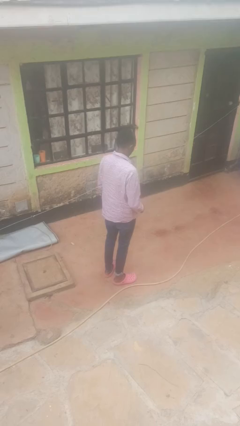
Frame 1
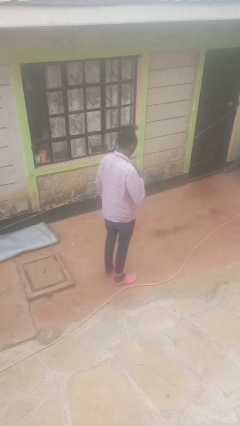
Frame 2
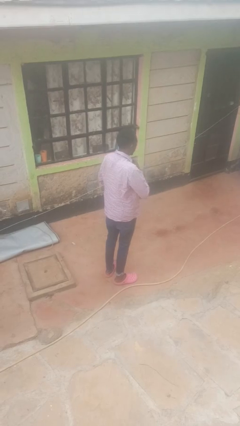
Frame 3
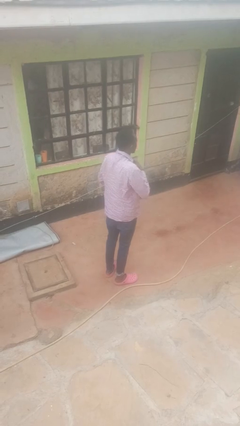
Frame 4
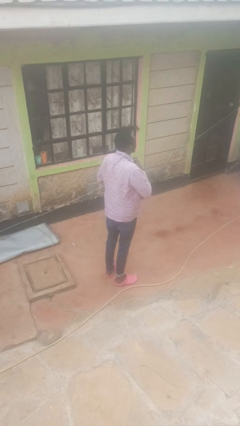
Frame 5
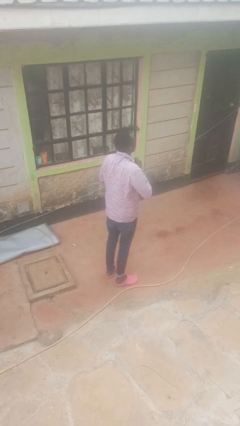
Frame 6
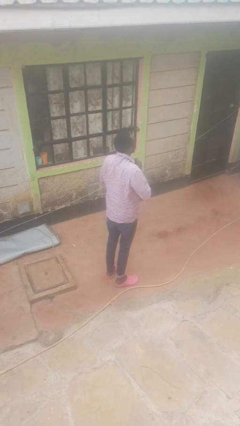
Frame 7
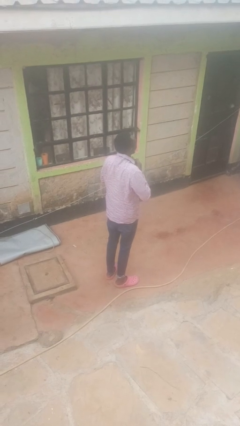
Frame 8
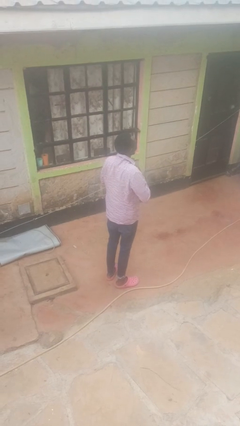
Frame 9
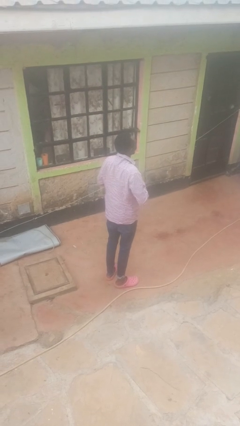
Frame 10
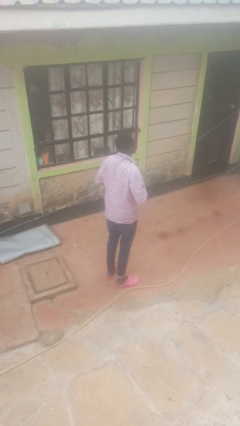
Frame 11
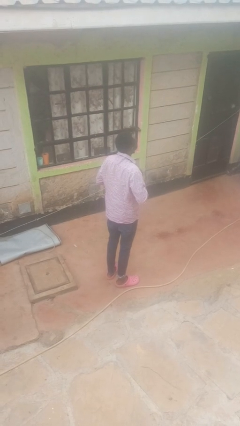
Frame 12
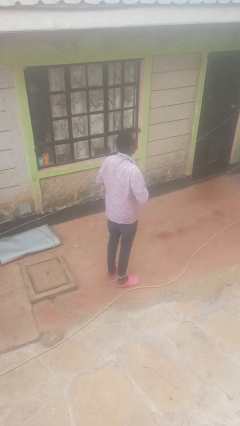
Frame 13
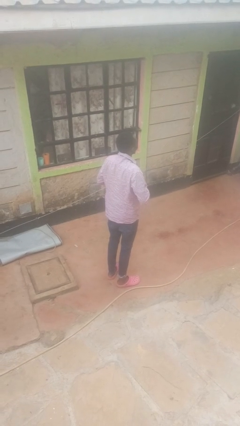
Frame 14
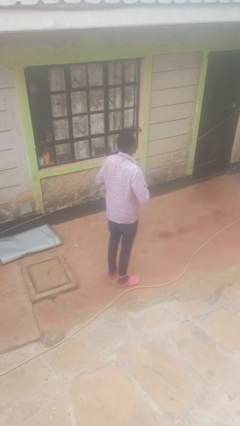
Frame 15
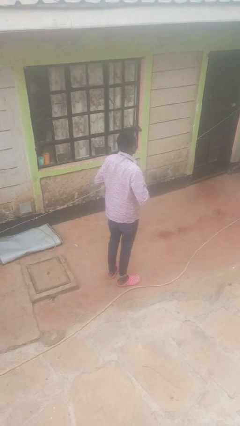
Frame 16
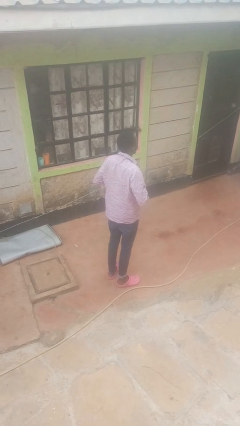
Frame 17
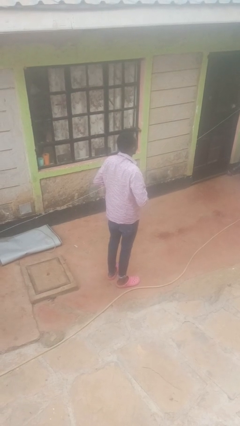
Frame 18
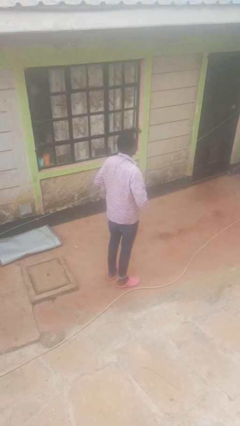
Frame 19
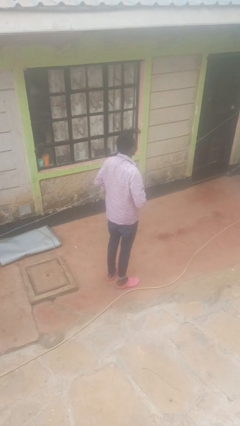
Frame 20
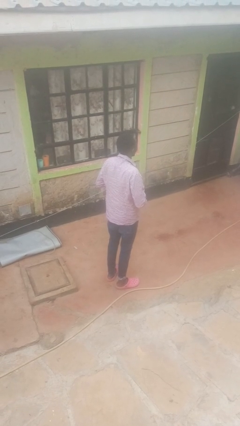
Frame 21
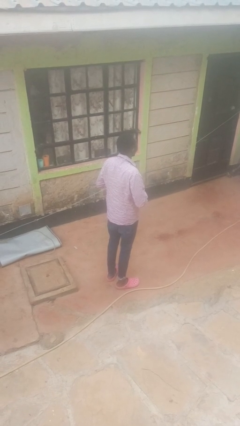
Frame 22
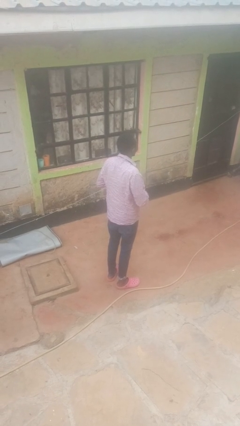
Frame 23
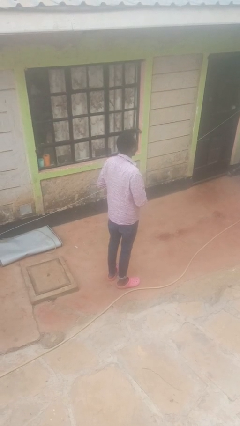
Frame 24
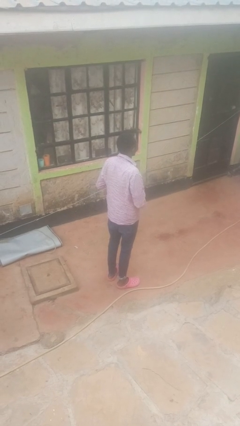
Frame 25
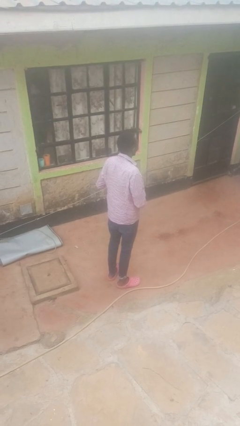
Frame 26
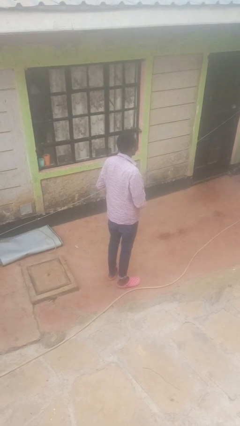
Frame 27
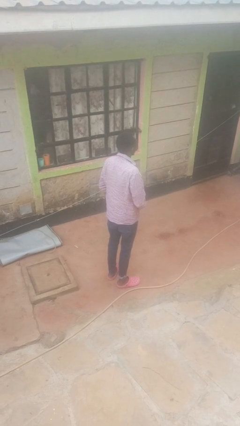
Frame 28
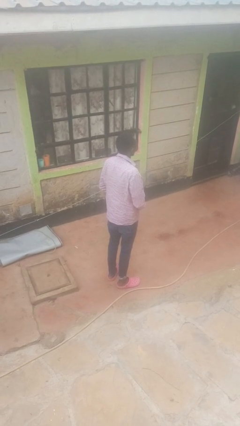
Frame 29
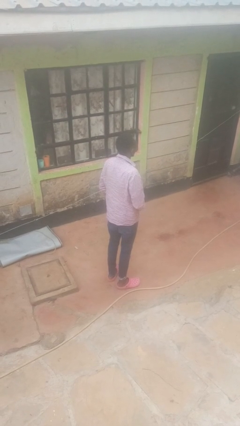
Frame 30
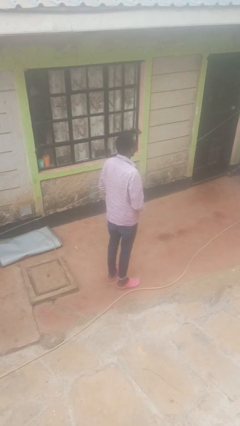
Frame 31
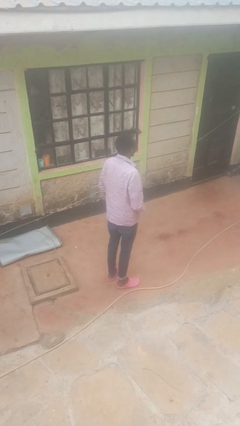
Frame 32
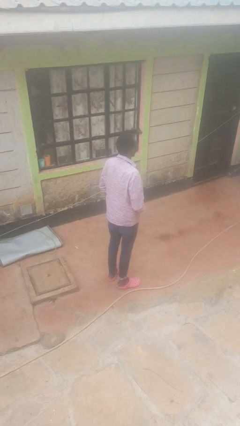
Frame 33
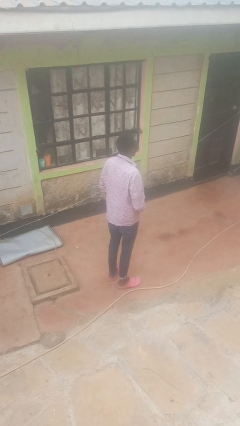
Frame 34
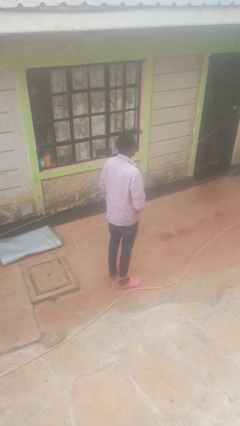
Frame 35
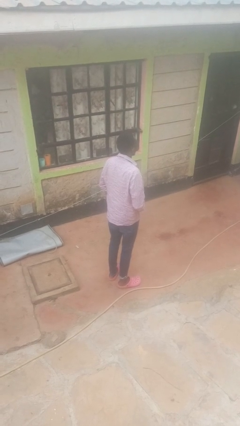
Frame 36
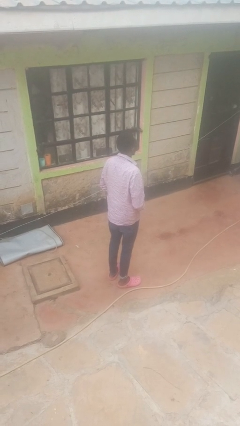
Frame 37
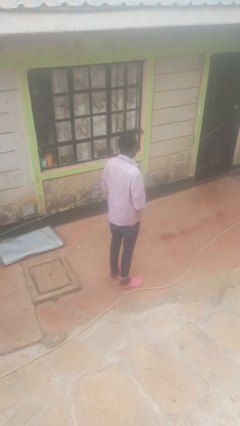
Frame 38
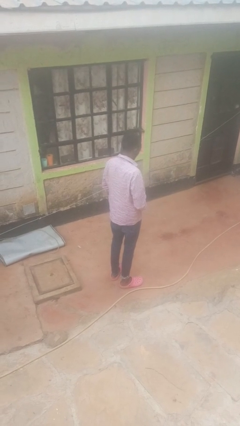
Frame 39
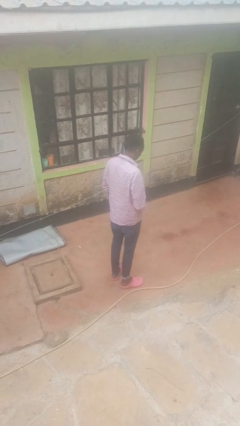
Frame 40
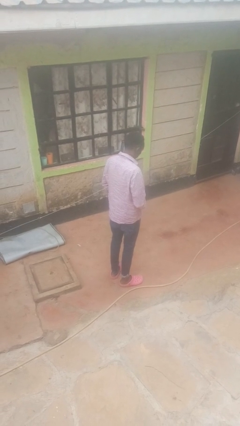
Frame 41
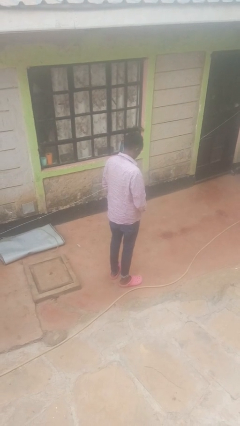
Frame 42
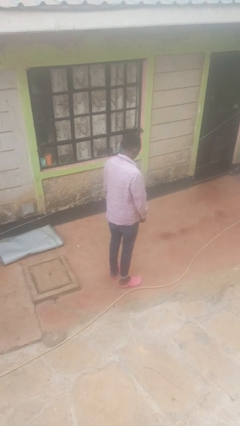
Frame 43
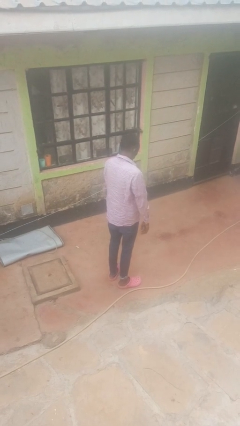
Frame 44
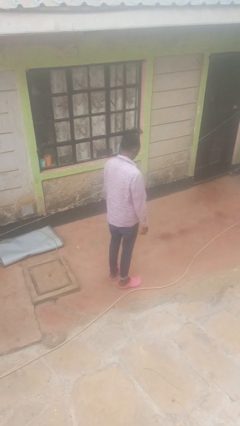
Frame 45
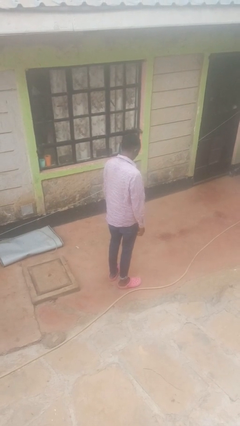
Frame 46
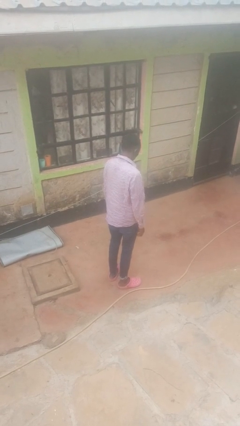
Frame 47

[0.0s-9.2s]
person unbuttons shirt

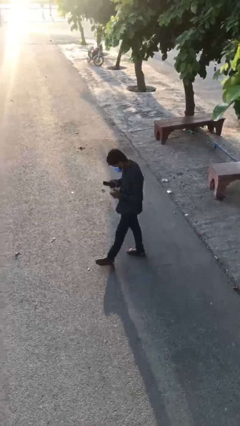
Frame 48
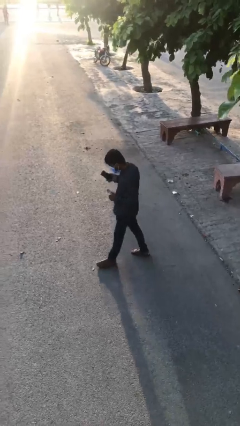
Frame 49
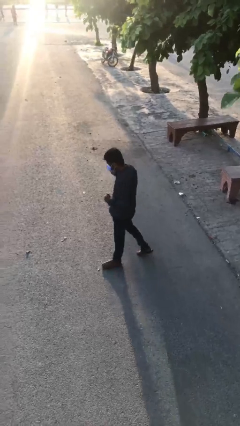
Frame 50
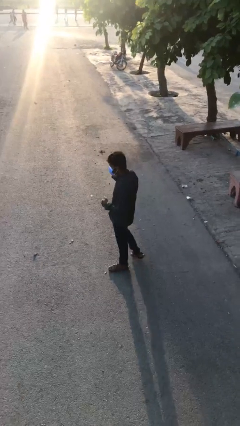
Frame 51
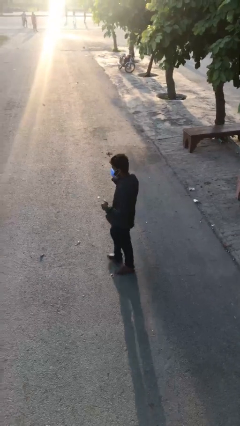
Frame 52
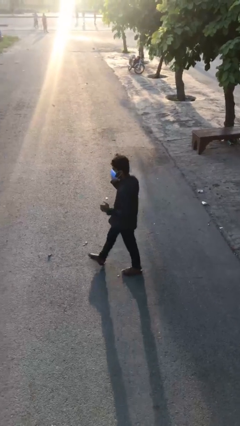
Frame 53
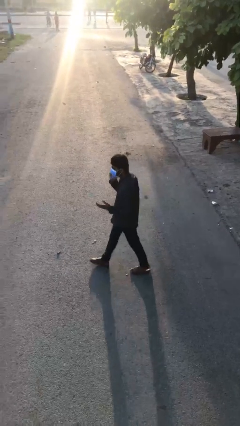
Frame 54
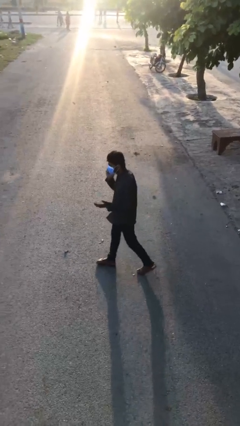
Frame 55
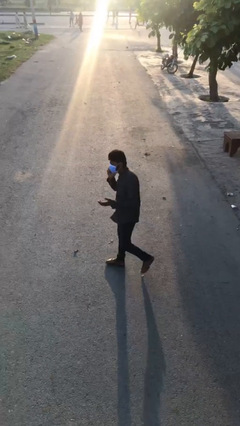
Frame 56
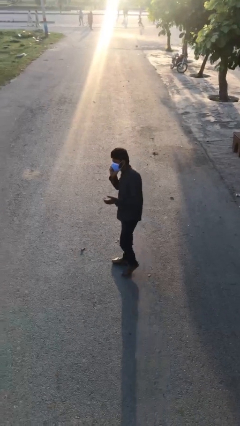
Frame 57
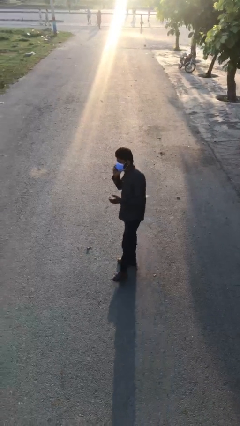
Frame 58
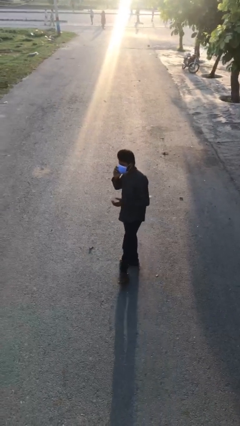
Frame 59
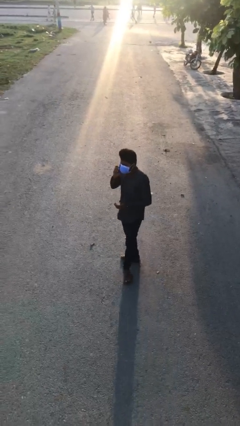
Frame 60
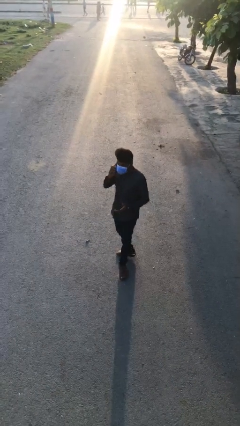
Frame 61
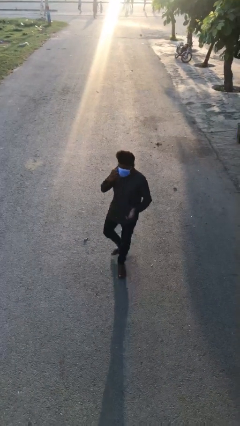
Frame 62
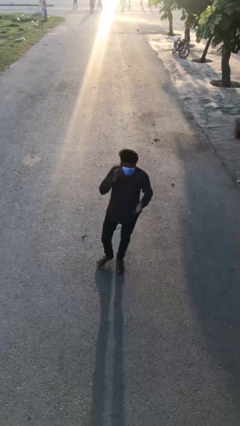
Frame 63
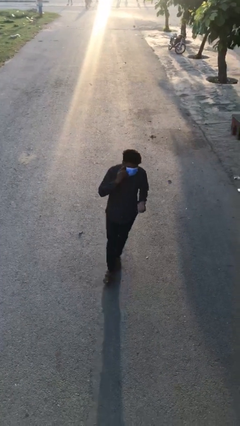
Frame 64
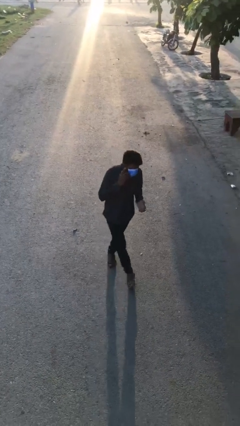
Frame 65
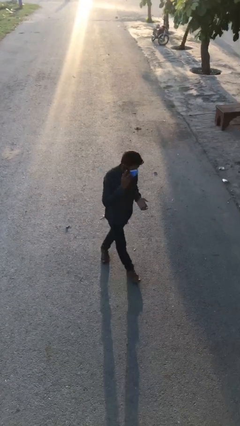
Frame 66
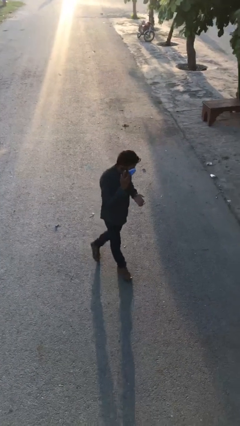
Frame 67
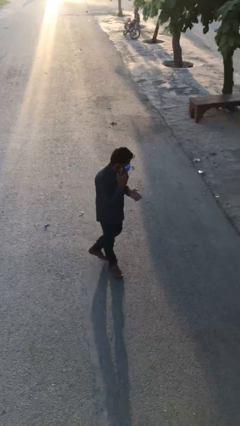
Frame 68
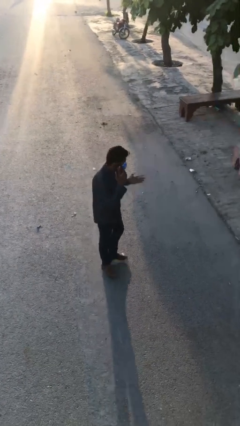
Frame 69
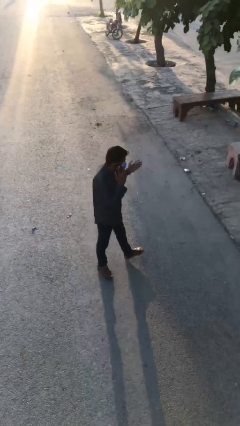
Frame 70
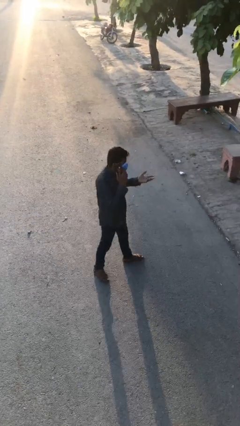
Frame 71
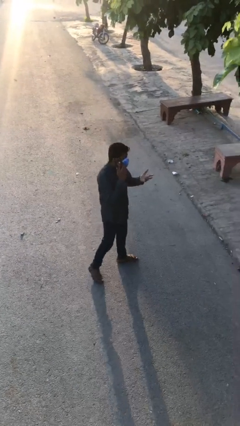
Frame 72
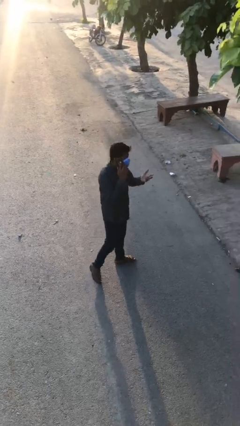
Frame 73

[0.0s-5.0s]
person talks on phone

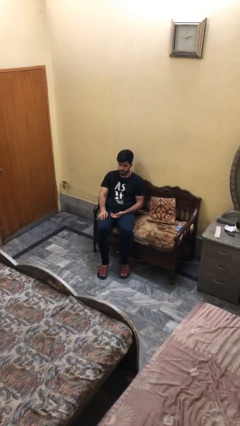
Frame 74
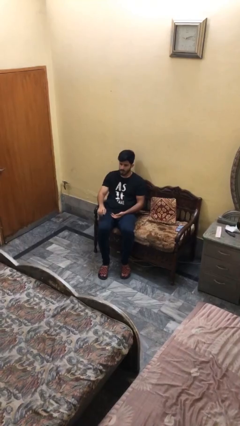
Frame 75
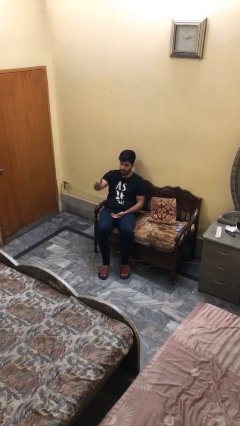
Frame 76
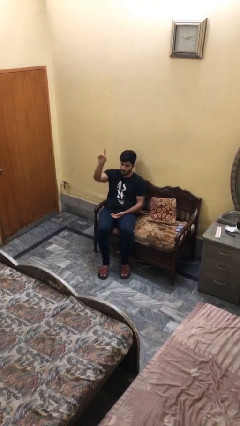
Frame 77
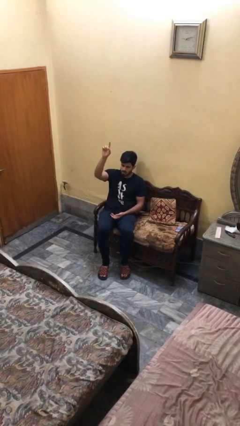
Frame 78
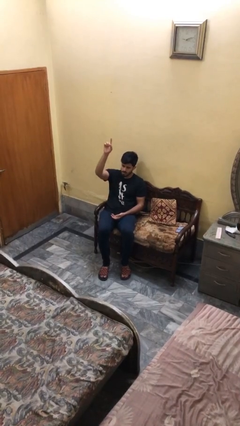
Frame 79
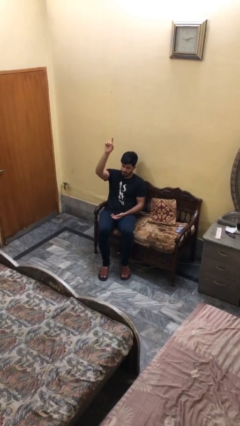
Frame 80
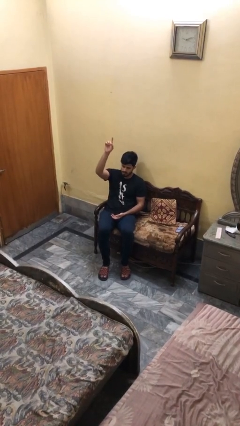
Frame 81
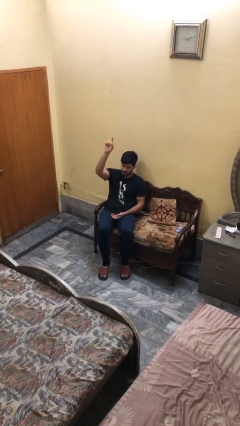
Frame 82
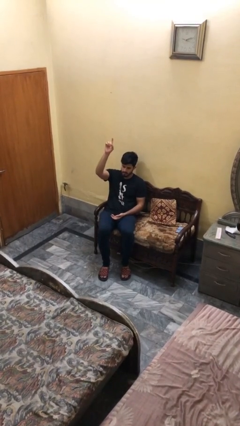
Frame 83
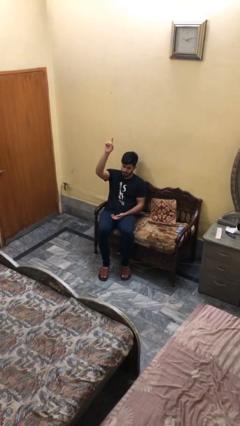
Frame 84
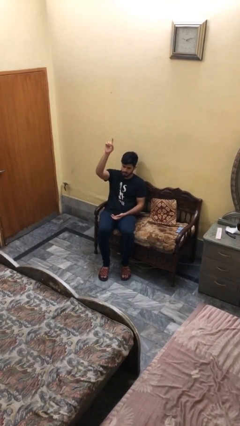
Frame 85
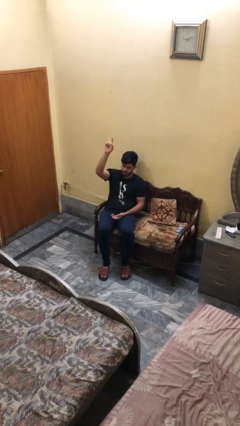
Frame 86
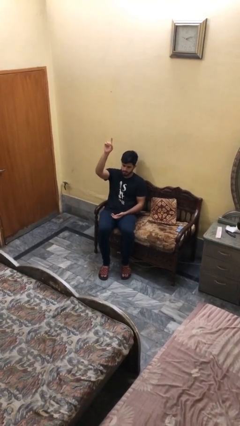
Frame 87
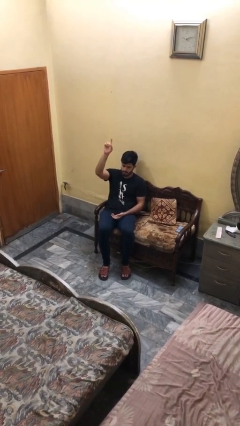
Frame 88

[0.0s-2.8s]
person gestures raise hand

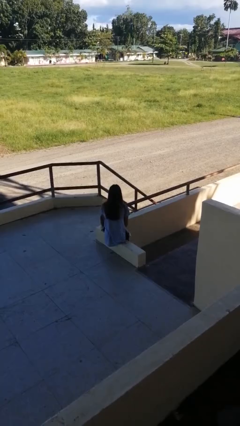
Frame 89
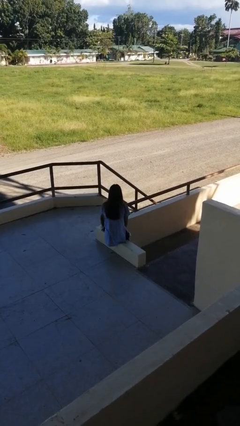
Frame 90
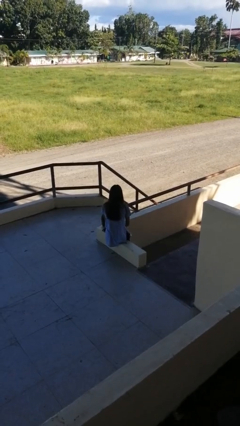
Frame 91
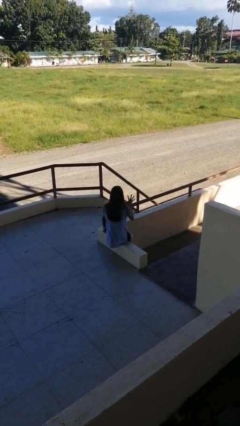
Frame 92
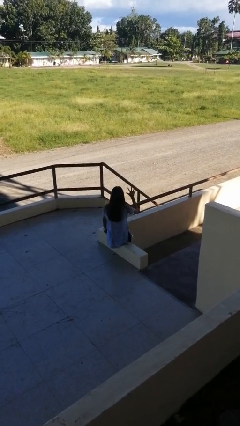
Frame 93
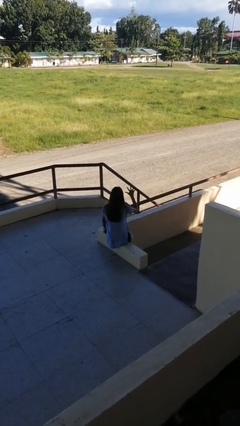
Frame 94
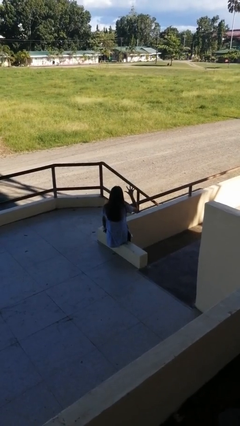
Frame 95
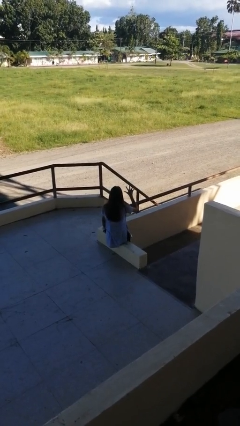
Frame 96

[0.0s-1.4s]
person gestures number five
